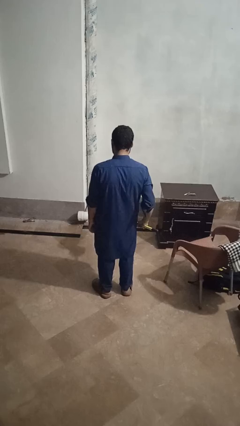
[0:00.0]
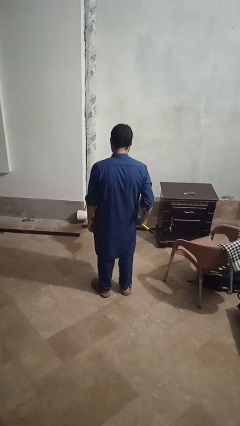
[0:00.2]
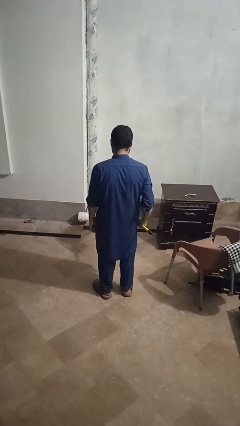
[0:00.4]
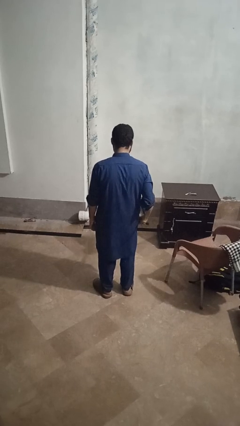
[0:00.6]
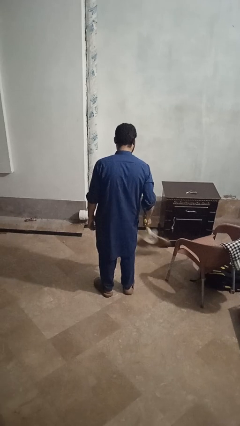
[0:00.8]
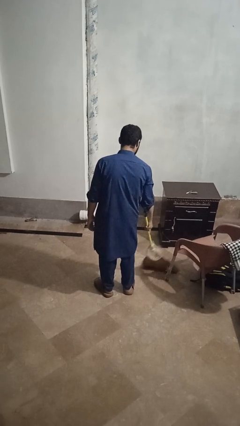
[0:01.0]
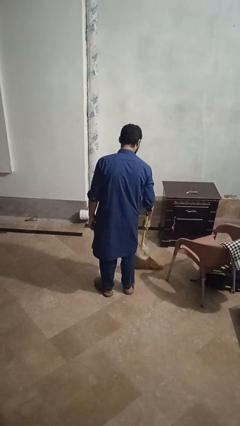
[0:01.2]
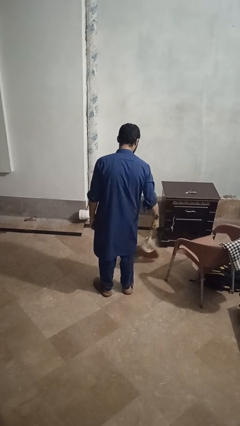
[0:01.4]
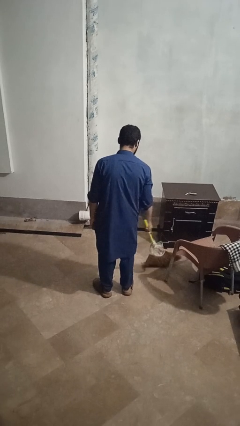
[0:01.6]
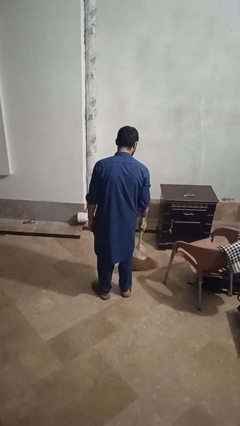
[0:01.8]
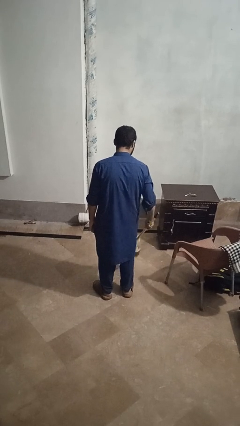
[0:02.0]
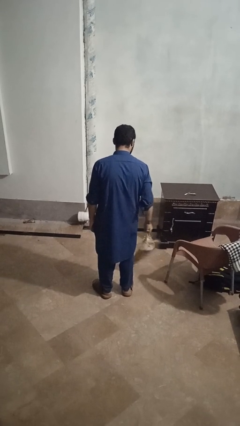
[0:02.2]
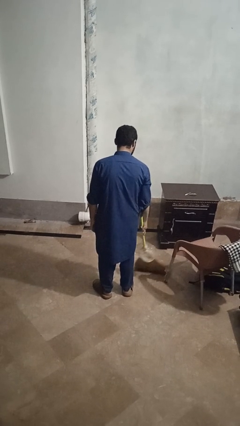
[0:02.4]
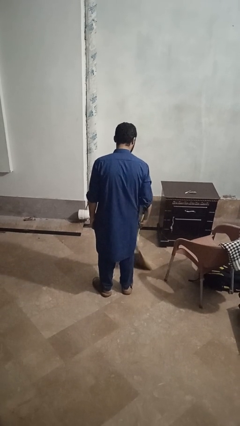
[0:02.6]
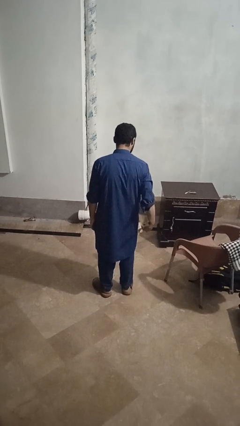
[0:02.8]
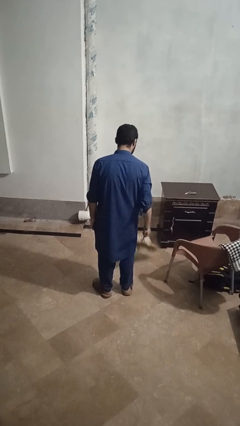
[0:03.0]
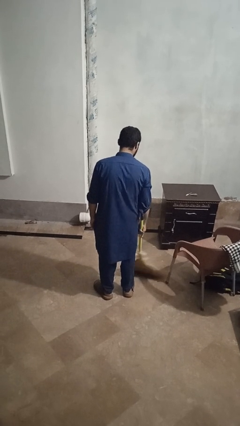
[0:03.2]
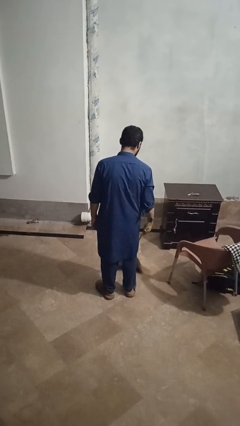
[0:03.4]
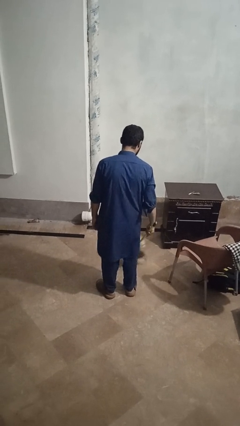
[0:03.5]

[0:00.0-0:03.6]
person mops

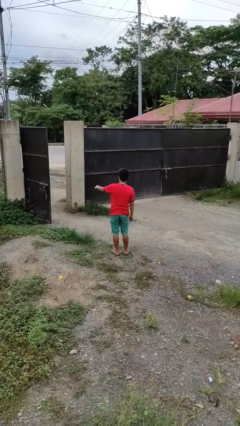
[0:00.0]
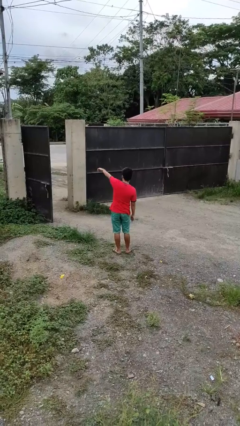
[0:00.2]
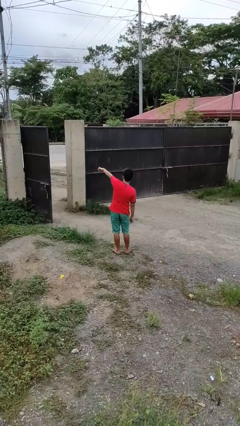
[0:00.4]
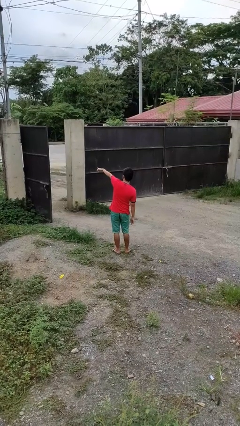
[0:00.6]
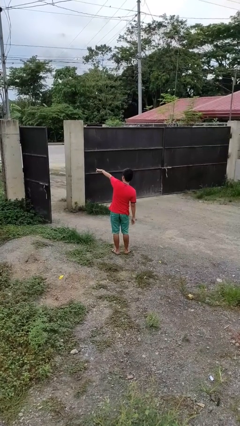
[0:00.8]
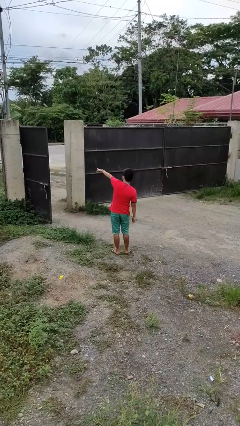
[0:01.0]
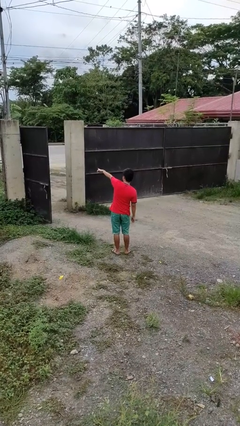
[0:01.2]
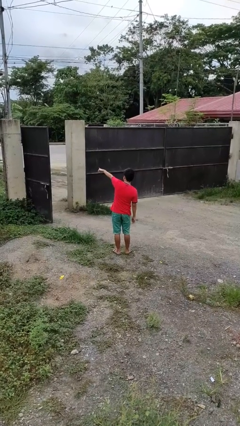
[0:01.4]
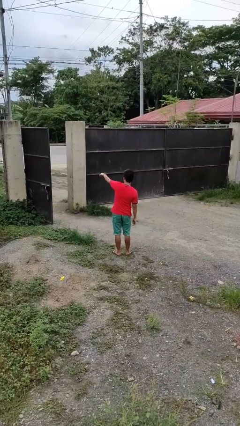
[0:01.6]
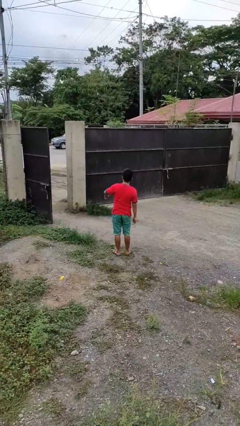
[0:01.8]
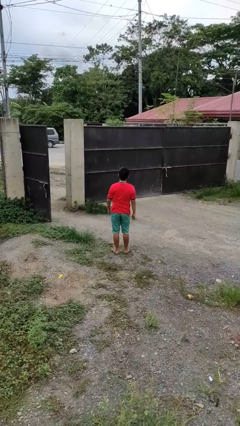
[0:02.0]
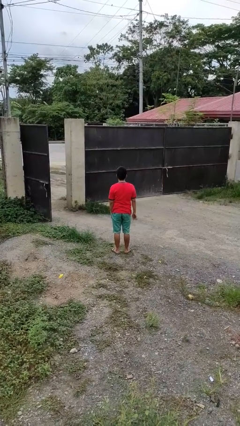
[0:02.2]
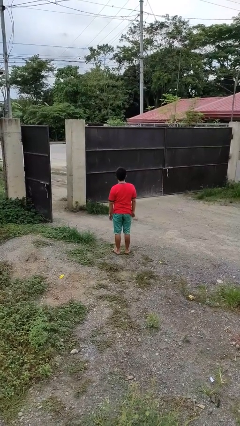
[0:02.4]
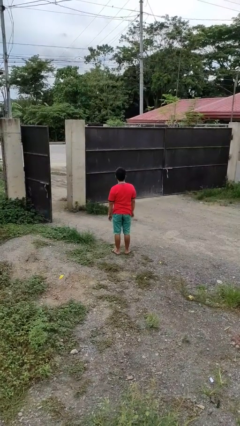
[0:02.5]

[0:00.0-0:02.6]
person points at person

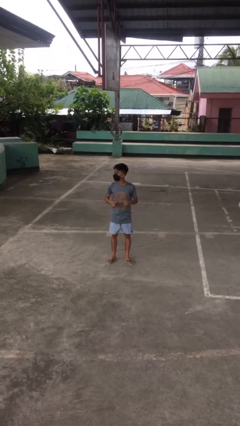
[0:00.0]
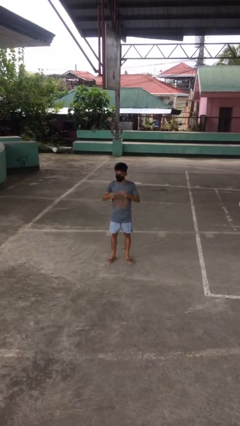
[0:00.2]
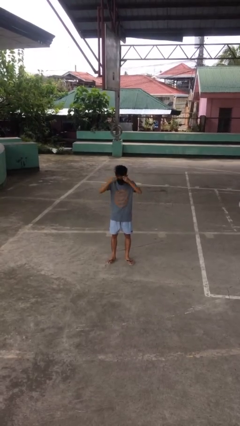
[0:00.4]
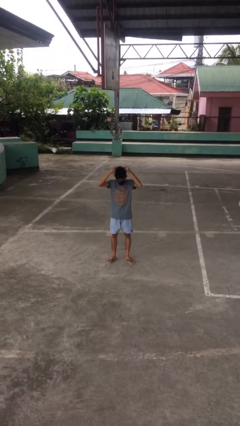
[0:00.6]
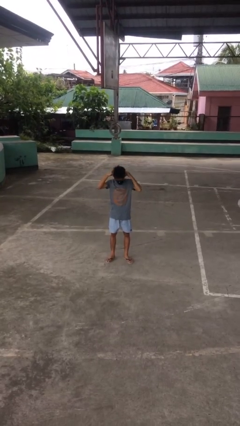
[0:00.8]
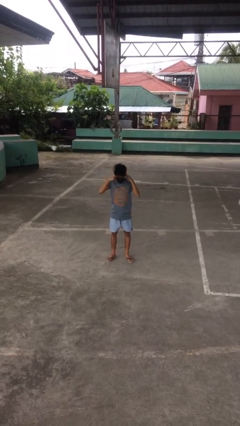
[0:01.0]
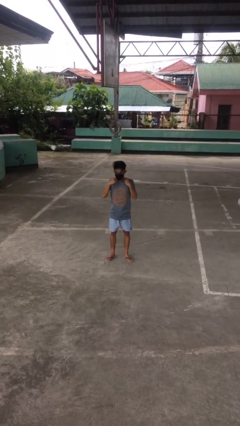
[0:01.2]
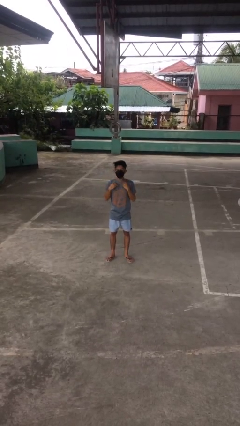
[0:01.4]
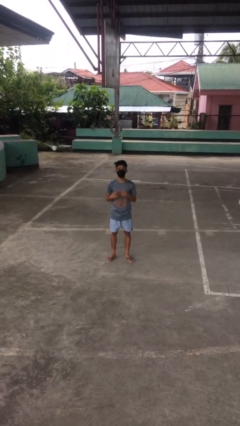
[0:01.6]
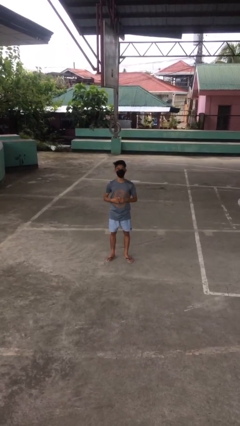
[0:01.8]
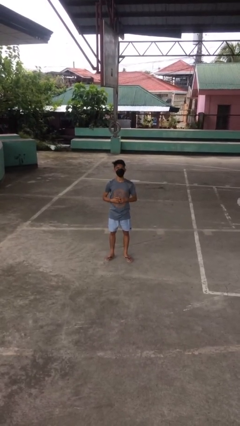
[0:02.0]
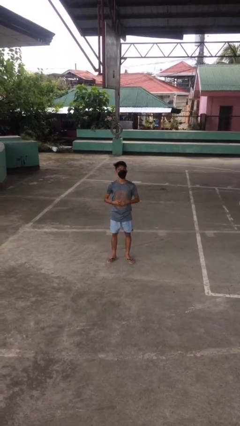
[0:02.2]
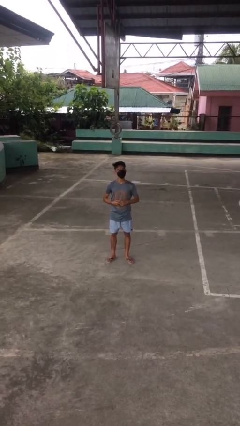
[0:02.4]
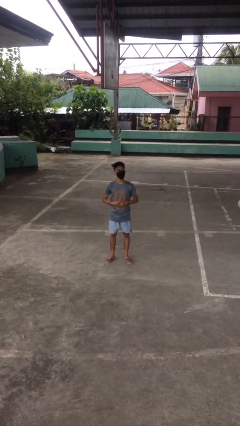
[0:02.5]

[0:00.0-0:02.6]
person puts on necklace

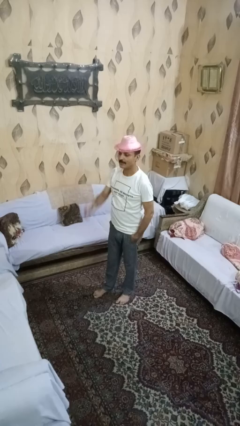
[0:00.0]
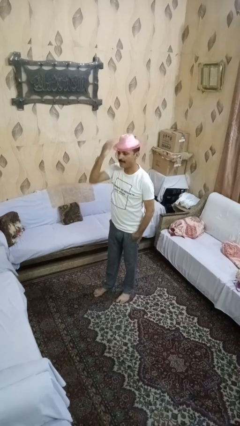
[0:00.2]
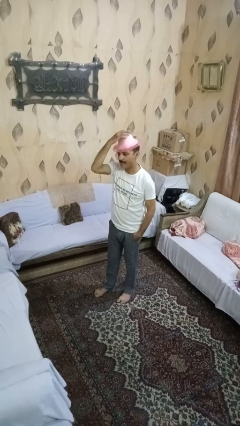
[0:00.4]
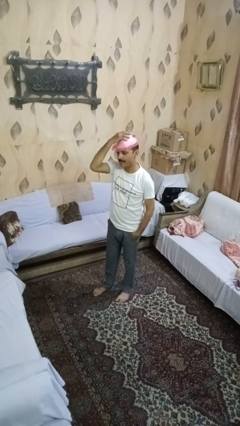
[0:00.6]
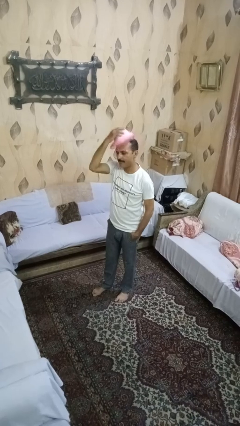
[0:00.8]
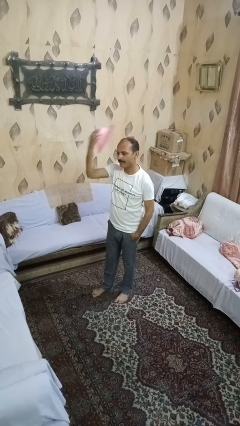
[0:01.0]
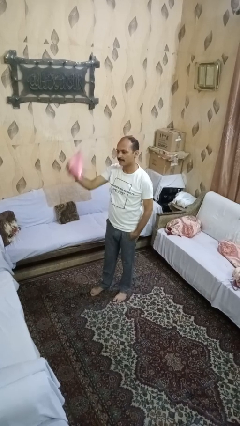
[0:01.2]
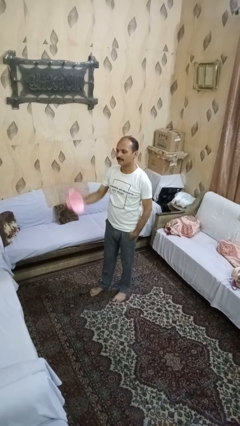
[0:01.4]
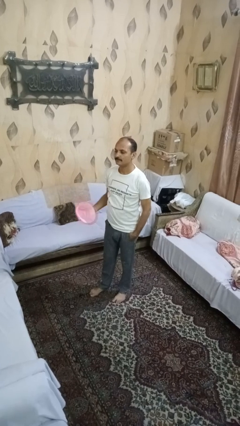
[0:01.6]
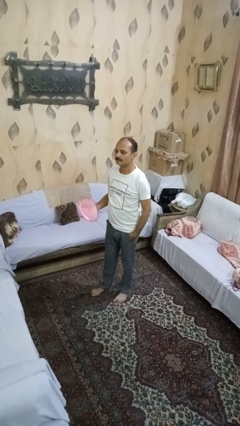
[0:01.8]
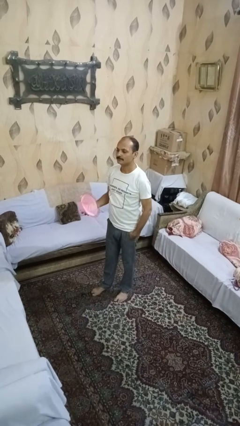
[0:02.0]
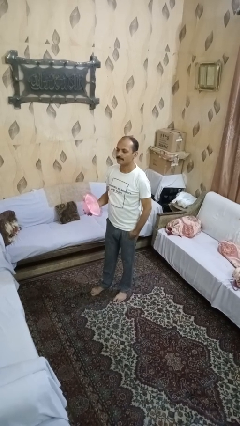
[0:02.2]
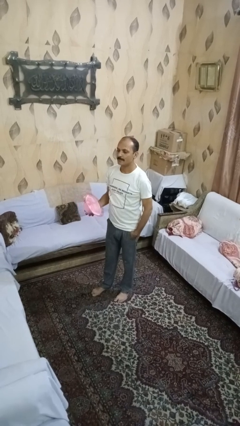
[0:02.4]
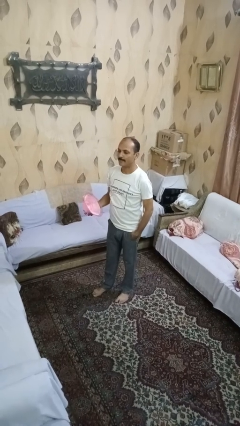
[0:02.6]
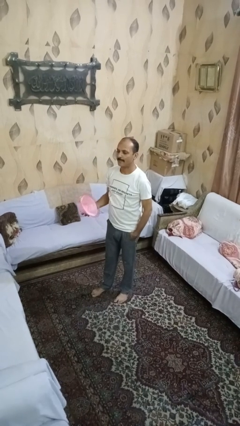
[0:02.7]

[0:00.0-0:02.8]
person takes off hat

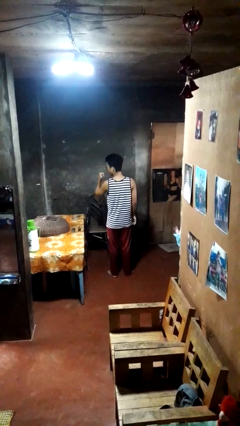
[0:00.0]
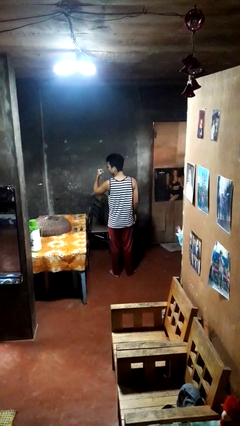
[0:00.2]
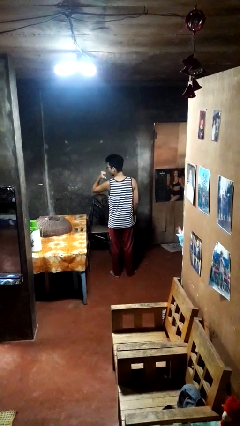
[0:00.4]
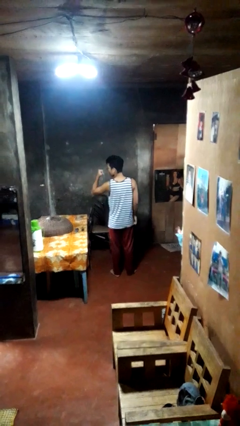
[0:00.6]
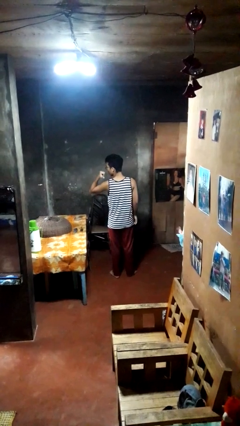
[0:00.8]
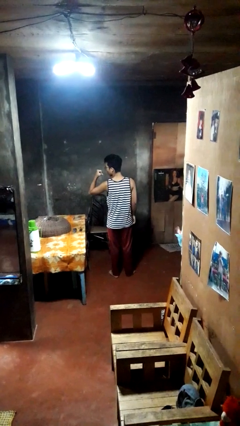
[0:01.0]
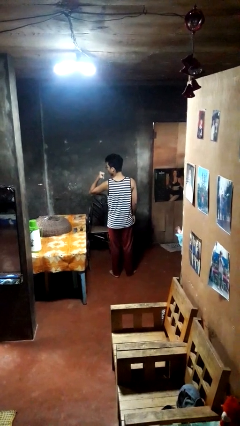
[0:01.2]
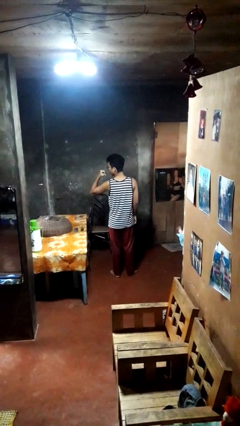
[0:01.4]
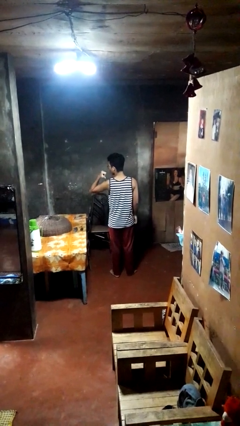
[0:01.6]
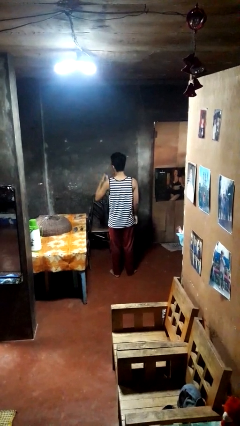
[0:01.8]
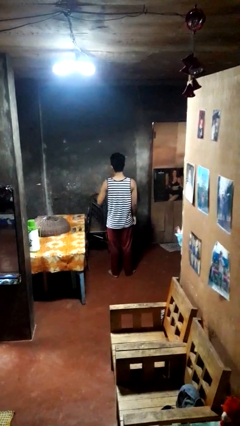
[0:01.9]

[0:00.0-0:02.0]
person gestures behind me

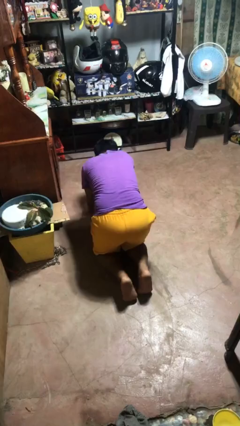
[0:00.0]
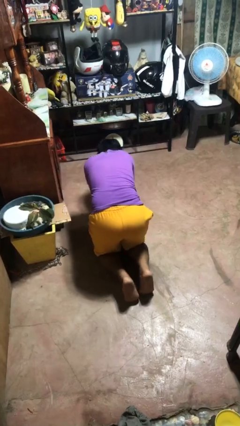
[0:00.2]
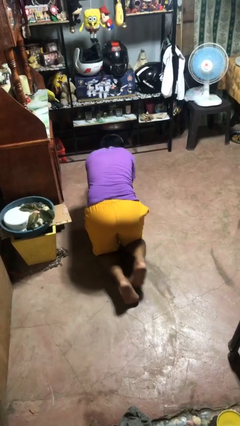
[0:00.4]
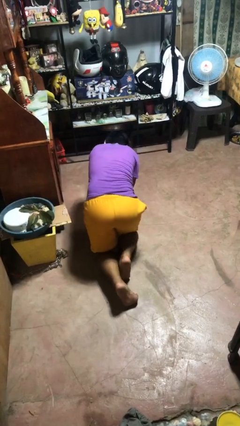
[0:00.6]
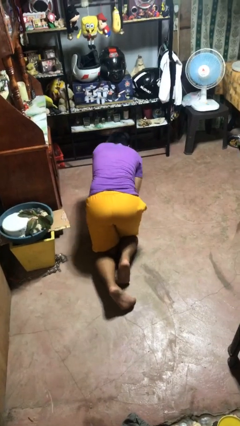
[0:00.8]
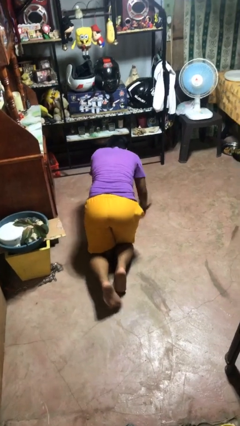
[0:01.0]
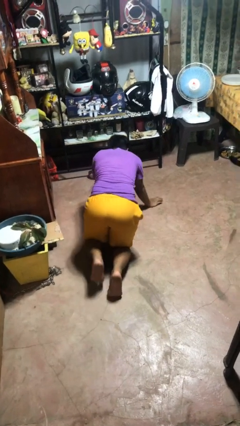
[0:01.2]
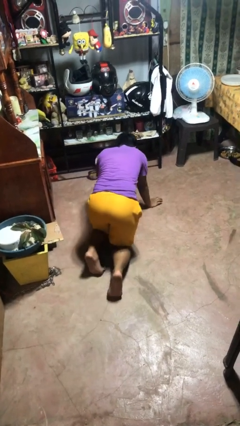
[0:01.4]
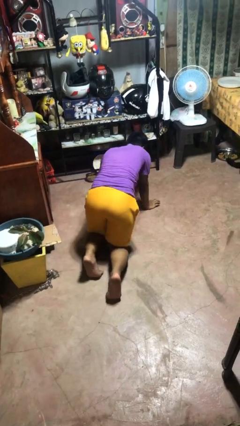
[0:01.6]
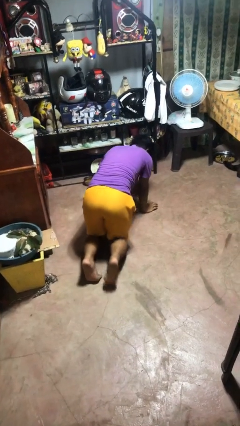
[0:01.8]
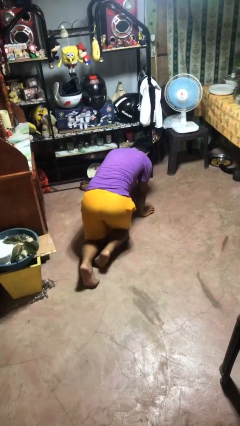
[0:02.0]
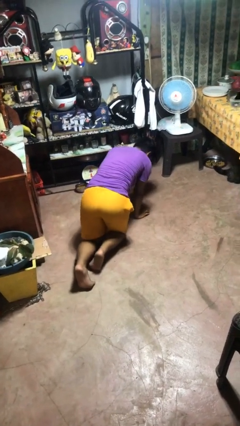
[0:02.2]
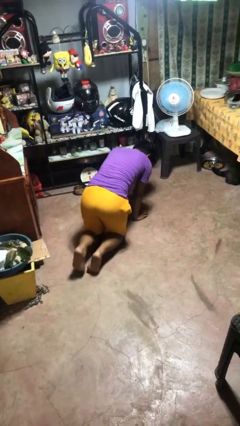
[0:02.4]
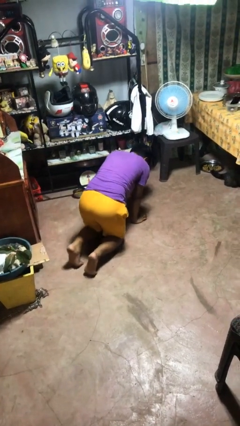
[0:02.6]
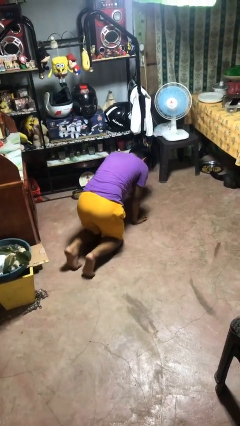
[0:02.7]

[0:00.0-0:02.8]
person crawls

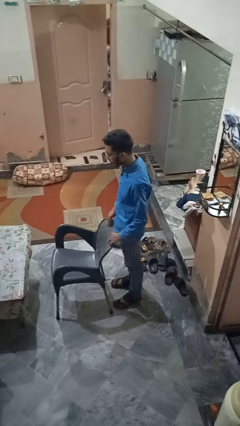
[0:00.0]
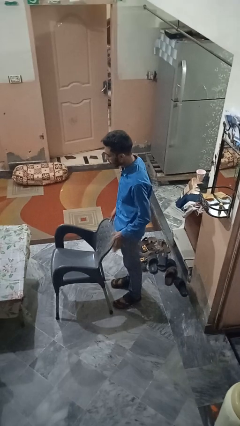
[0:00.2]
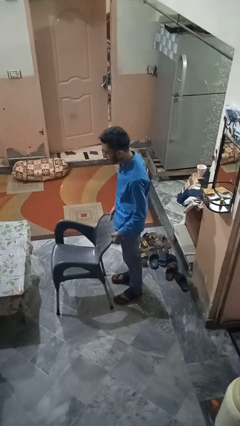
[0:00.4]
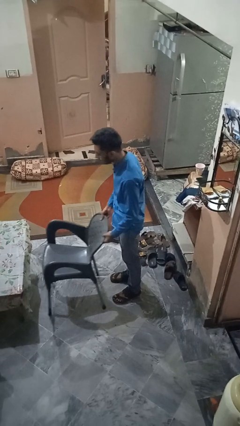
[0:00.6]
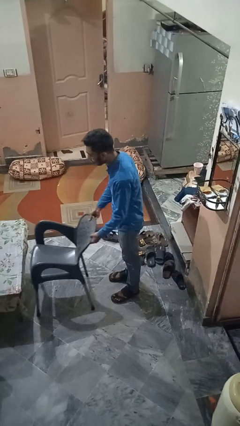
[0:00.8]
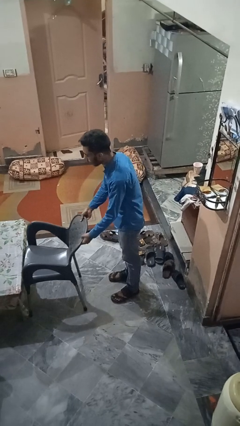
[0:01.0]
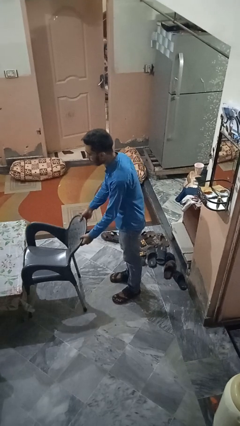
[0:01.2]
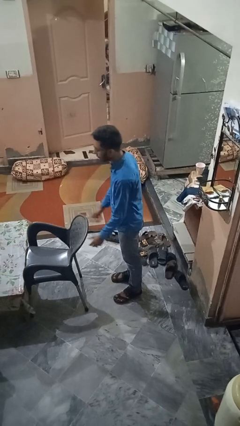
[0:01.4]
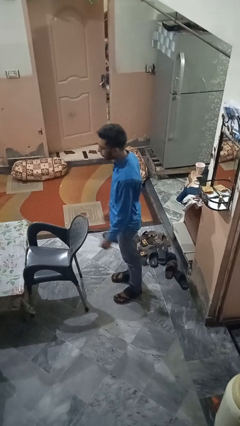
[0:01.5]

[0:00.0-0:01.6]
person pushes in chair
